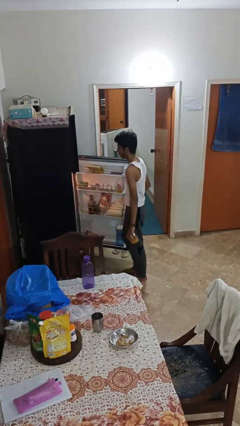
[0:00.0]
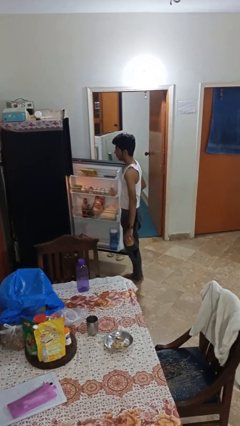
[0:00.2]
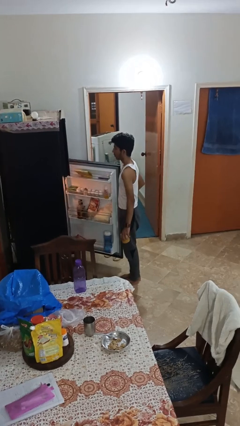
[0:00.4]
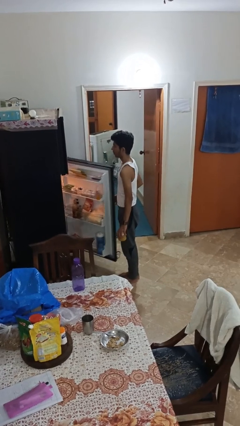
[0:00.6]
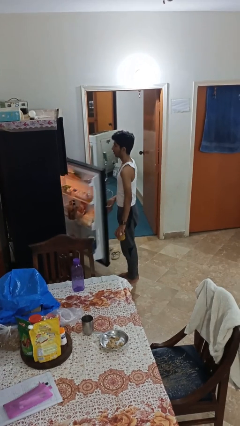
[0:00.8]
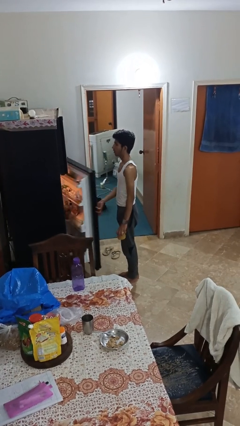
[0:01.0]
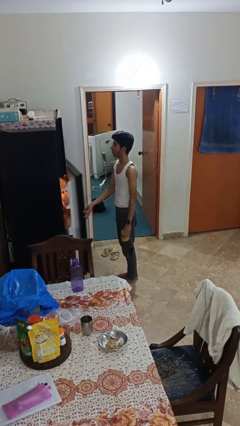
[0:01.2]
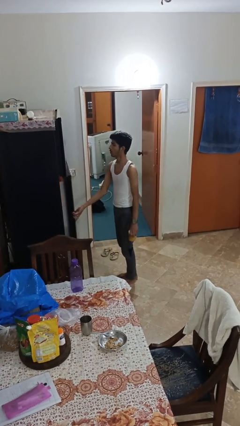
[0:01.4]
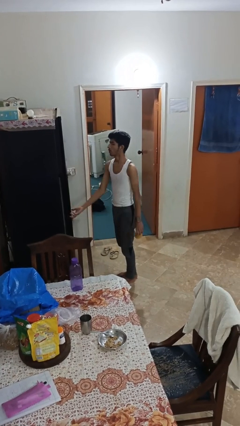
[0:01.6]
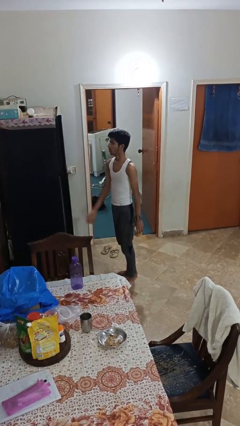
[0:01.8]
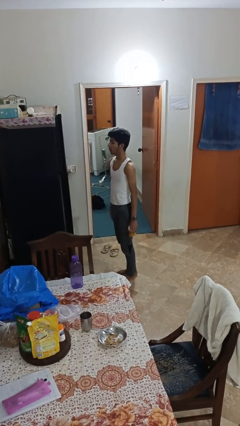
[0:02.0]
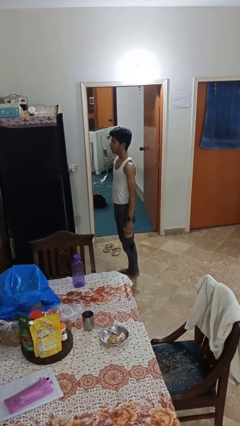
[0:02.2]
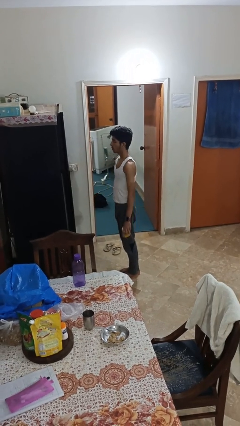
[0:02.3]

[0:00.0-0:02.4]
person closes refrigerator

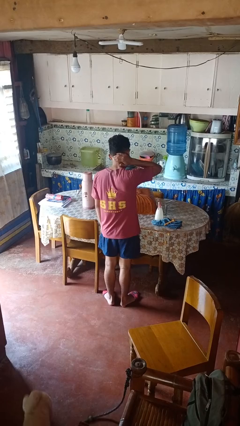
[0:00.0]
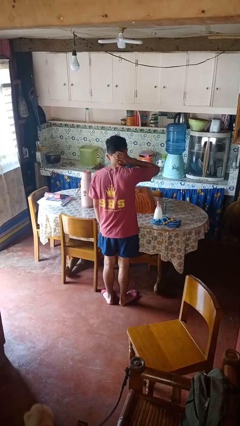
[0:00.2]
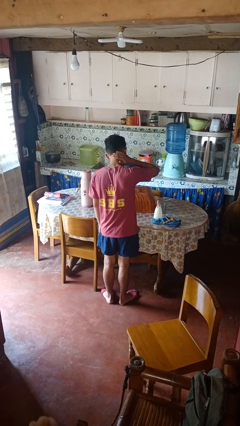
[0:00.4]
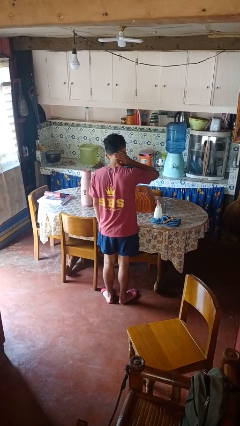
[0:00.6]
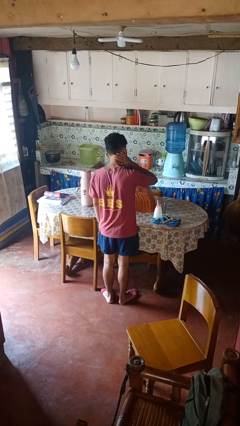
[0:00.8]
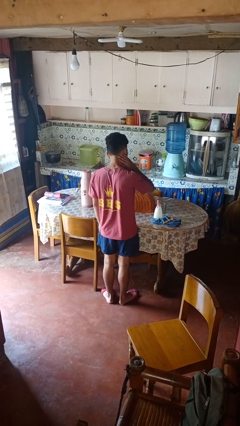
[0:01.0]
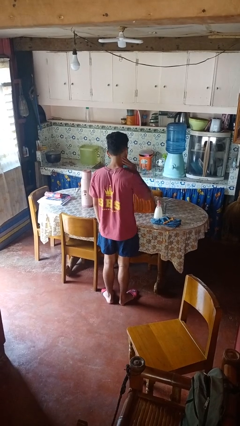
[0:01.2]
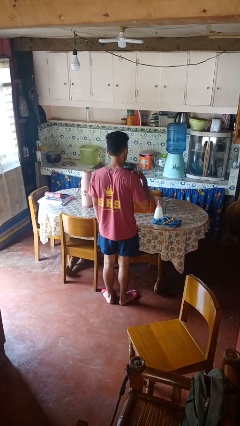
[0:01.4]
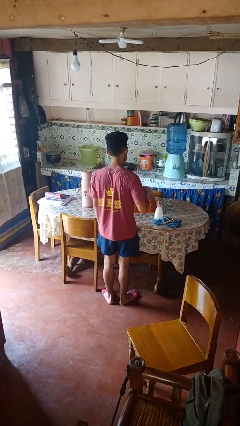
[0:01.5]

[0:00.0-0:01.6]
person swats bug

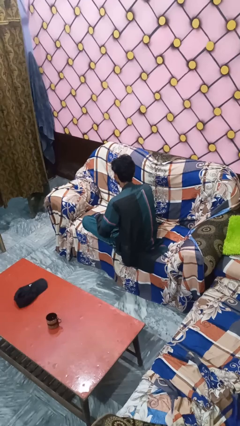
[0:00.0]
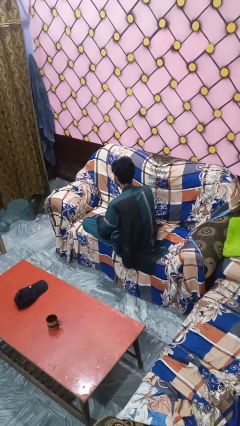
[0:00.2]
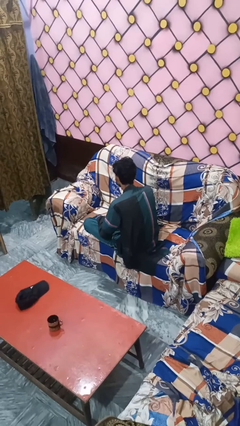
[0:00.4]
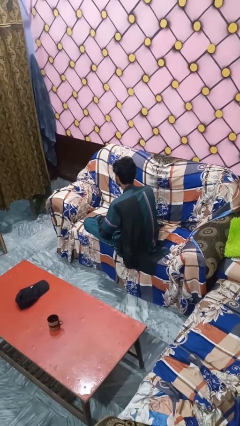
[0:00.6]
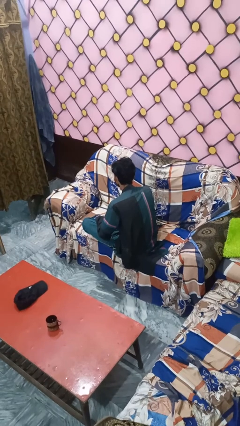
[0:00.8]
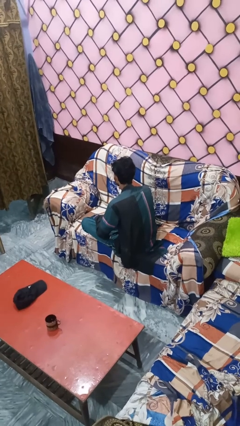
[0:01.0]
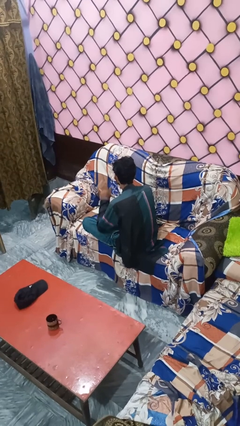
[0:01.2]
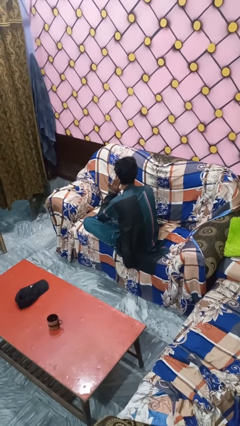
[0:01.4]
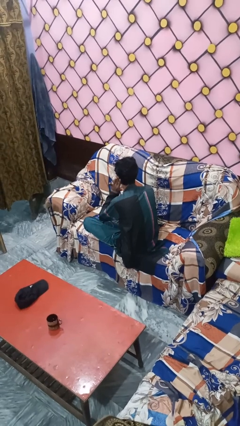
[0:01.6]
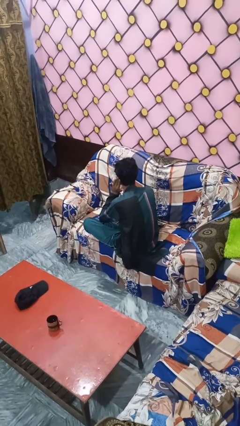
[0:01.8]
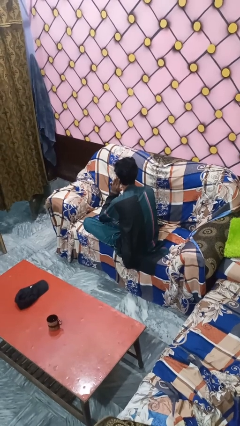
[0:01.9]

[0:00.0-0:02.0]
person gestures listen closely

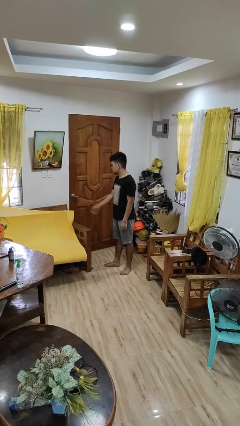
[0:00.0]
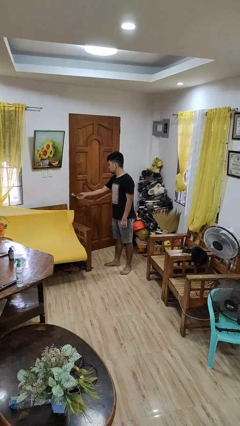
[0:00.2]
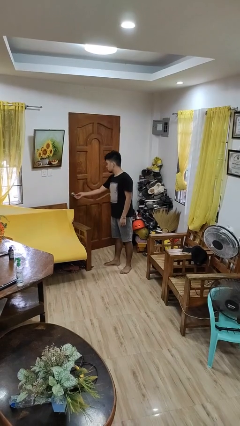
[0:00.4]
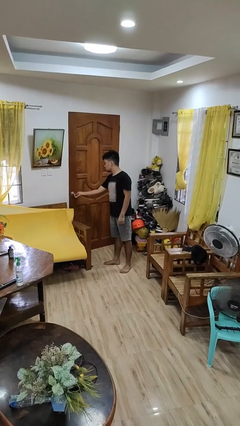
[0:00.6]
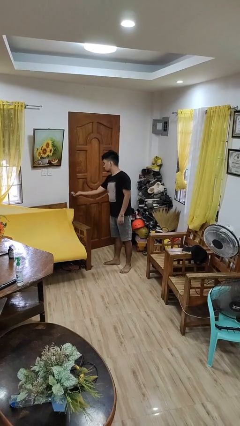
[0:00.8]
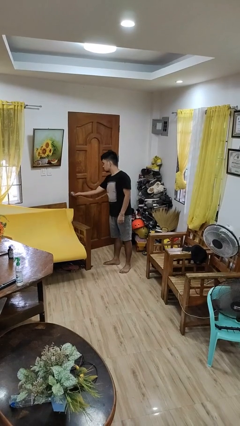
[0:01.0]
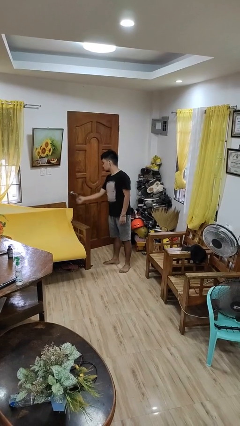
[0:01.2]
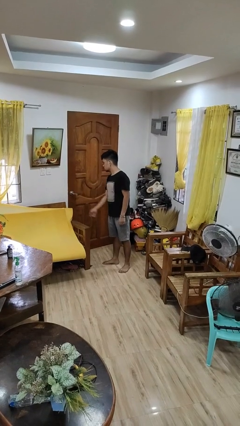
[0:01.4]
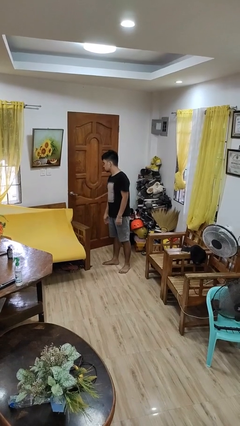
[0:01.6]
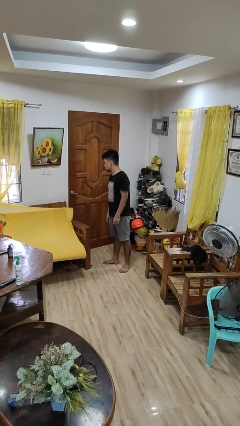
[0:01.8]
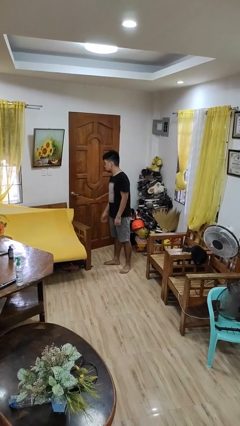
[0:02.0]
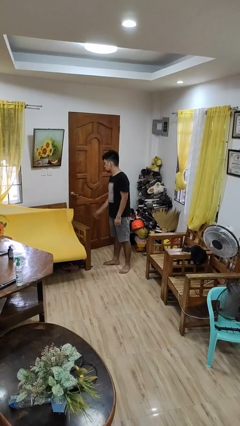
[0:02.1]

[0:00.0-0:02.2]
person unlocks door with keys

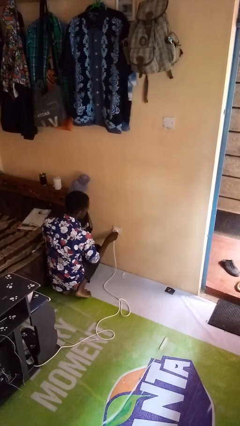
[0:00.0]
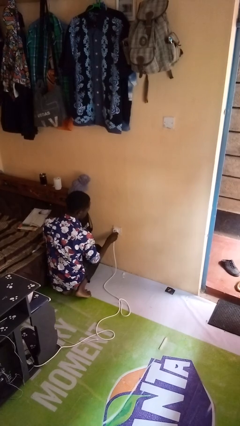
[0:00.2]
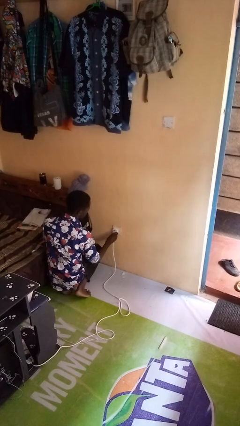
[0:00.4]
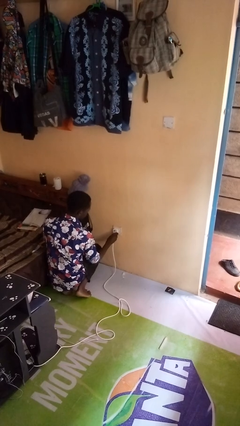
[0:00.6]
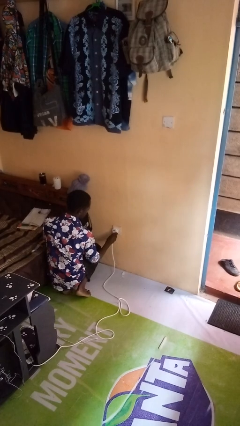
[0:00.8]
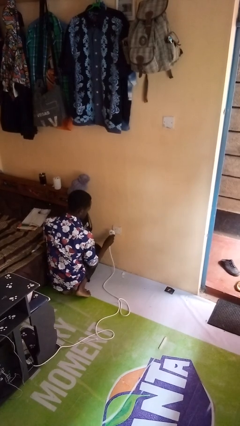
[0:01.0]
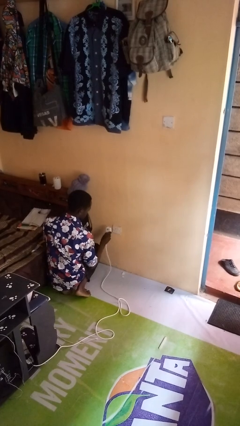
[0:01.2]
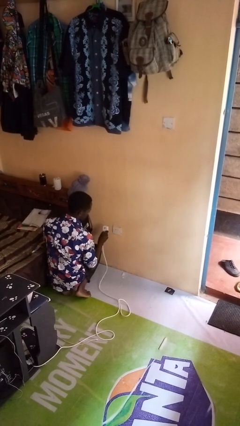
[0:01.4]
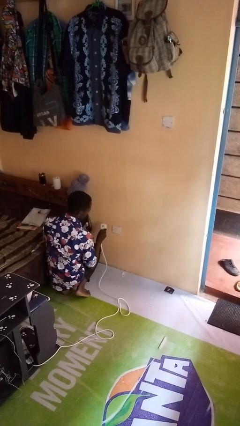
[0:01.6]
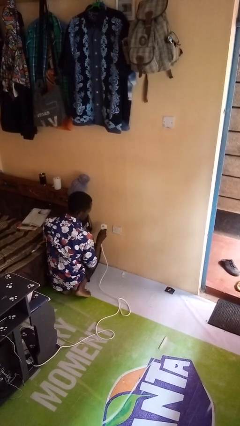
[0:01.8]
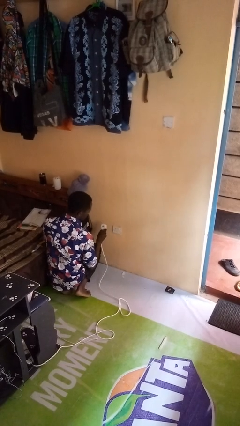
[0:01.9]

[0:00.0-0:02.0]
person unplugs from electrical socket

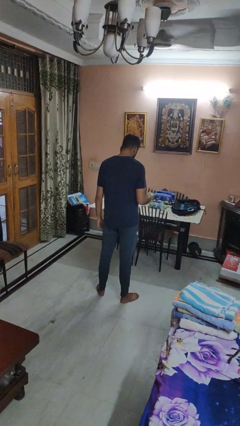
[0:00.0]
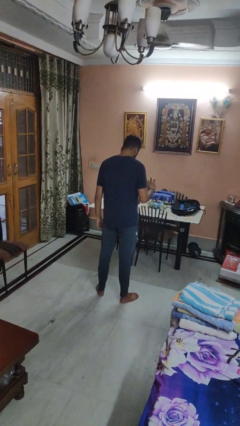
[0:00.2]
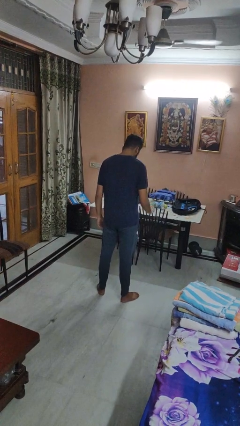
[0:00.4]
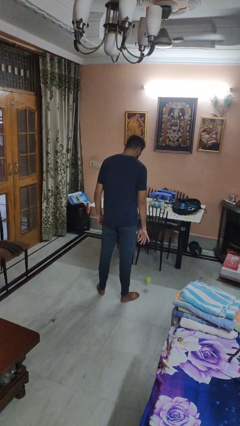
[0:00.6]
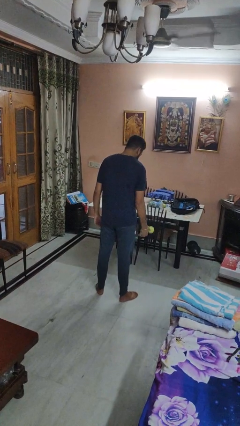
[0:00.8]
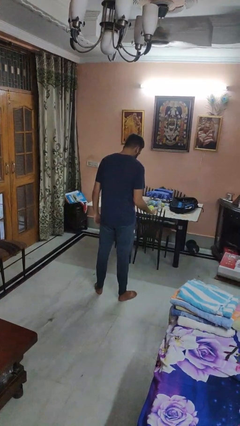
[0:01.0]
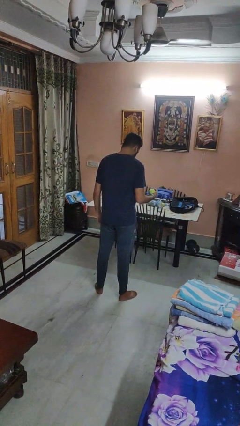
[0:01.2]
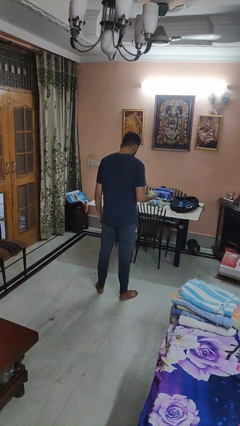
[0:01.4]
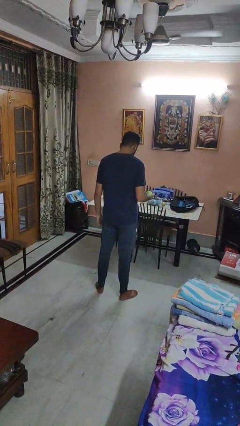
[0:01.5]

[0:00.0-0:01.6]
person bounces ball on floor

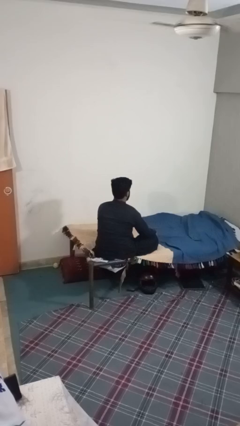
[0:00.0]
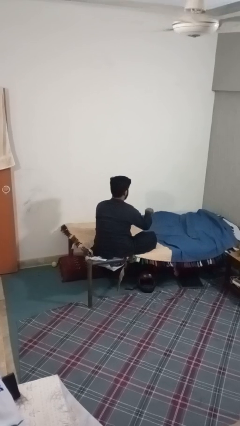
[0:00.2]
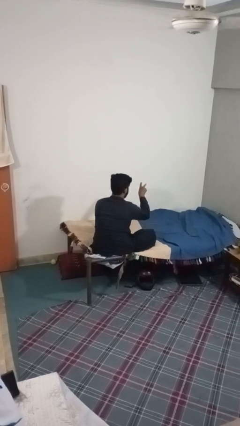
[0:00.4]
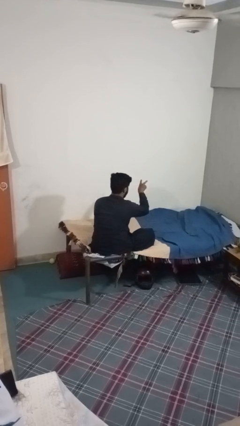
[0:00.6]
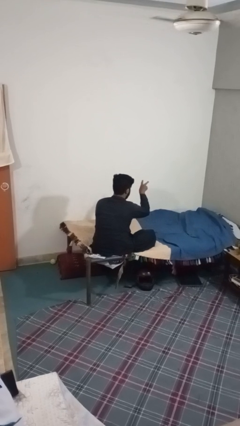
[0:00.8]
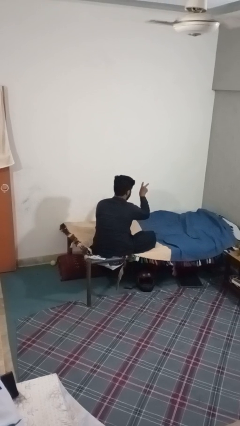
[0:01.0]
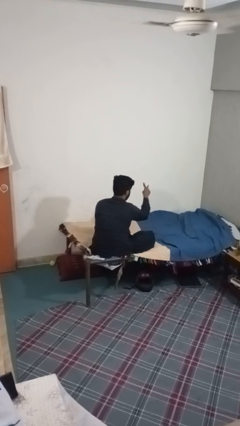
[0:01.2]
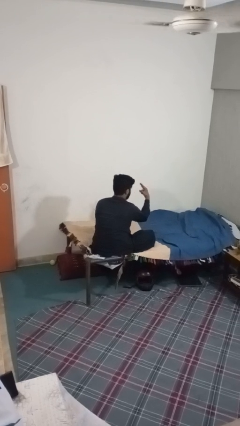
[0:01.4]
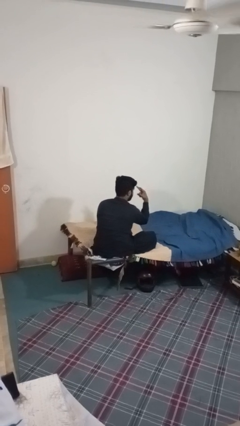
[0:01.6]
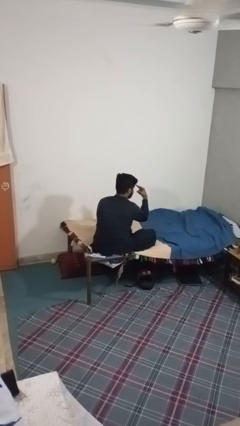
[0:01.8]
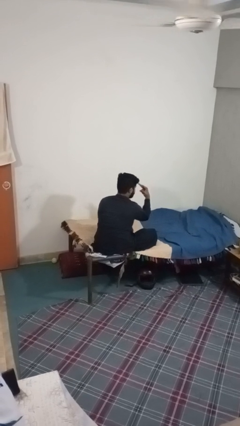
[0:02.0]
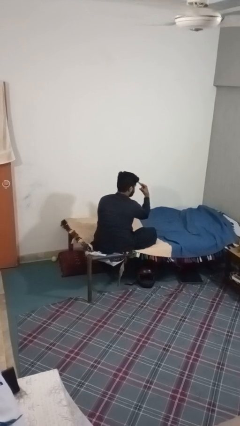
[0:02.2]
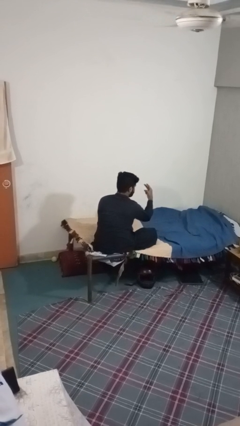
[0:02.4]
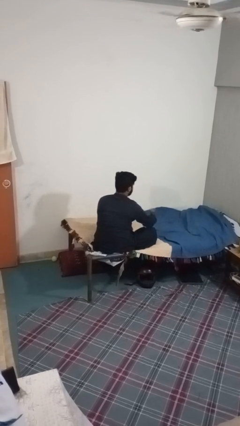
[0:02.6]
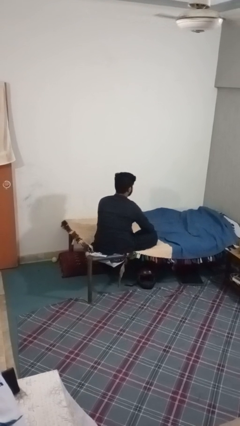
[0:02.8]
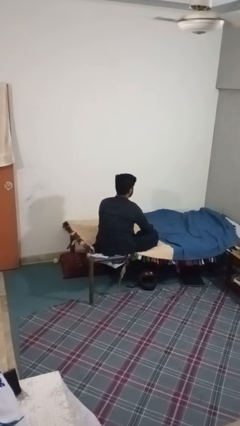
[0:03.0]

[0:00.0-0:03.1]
person gestures watch closely

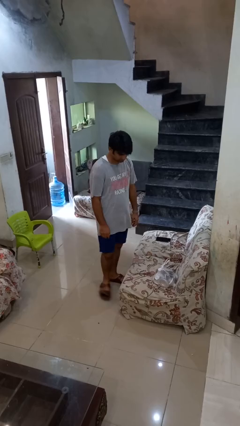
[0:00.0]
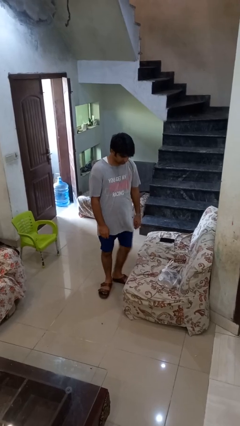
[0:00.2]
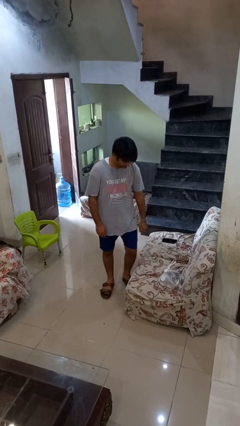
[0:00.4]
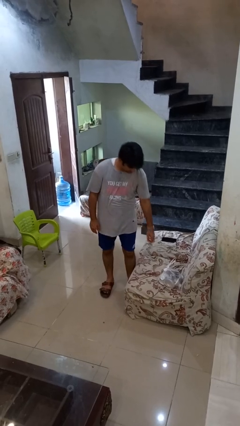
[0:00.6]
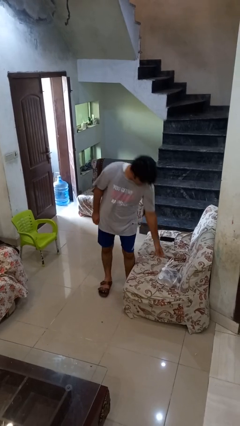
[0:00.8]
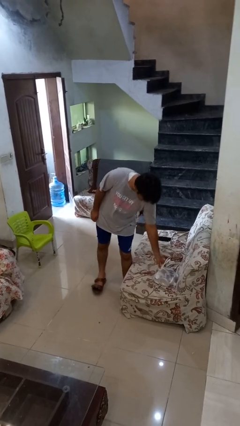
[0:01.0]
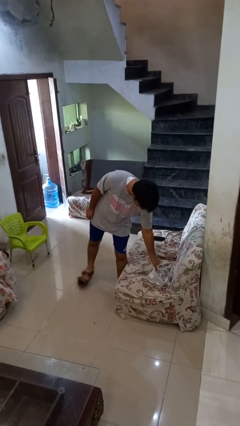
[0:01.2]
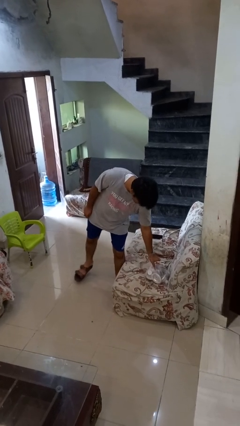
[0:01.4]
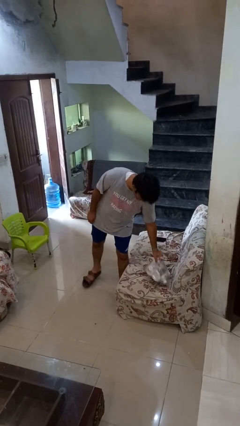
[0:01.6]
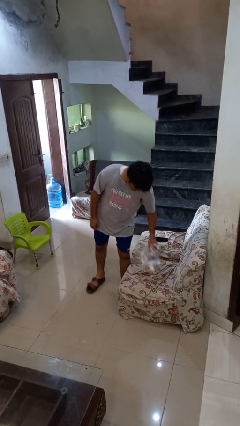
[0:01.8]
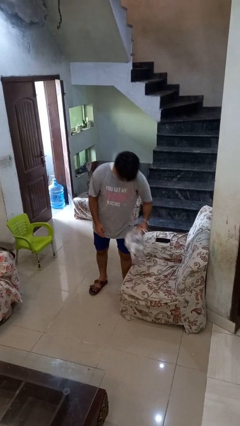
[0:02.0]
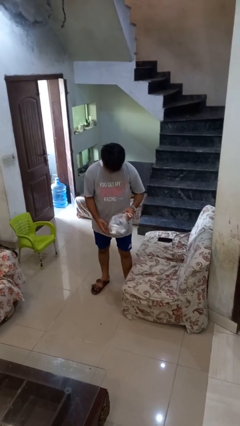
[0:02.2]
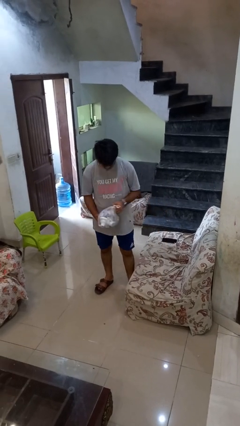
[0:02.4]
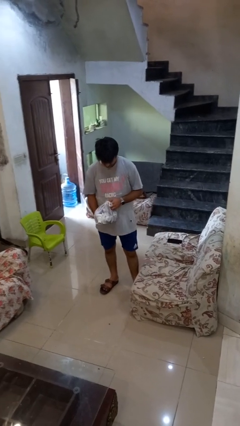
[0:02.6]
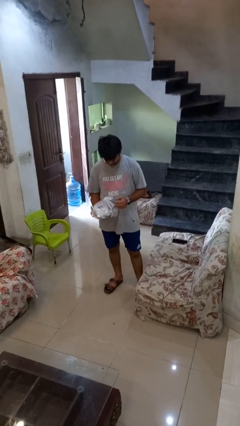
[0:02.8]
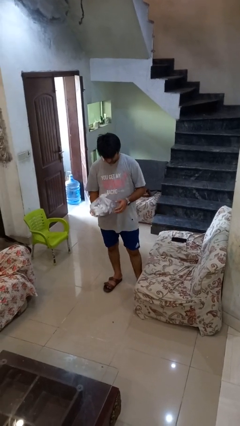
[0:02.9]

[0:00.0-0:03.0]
person picks up object from couch
